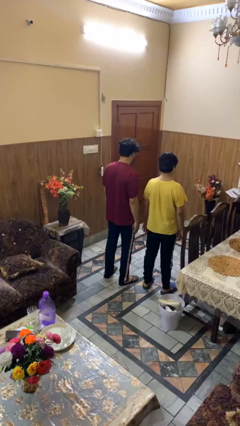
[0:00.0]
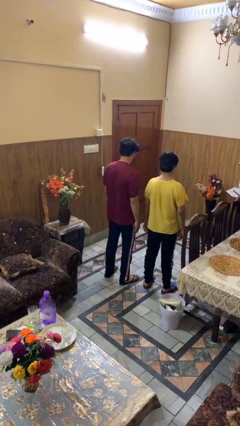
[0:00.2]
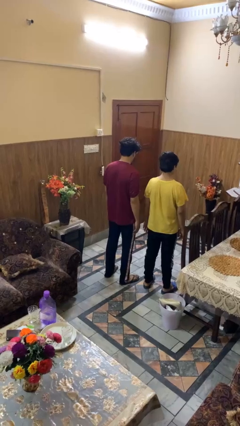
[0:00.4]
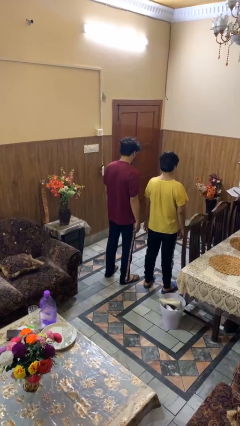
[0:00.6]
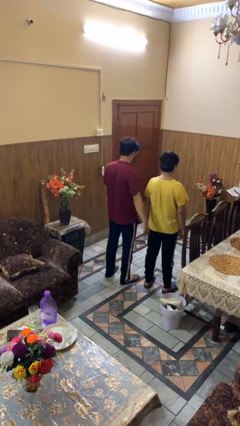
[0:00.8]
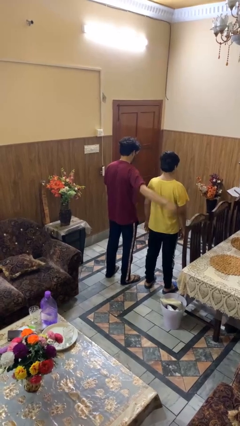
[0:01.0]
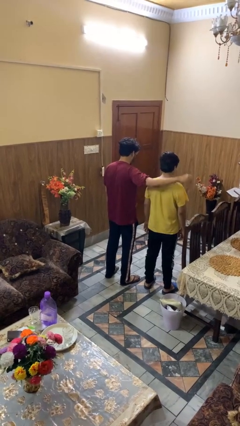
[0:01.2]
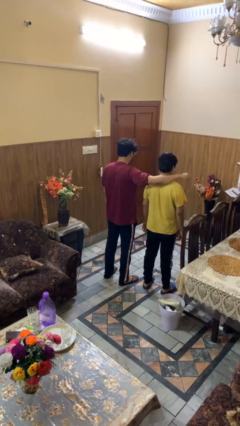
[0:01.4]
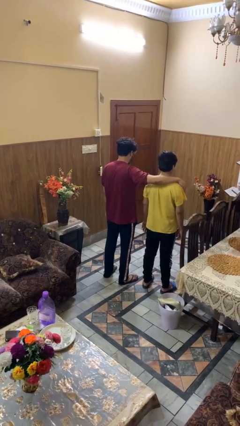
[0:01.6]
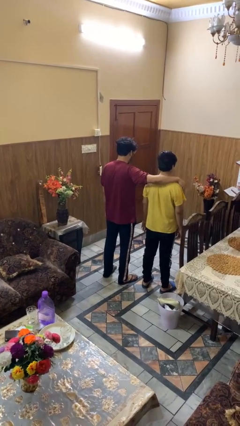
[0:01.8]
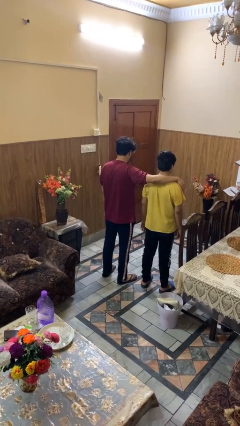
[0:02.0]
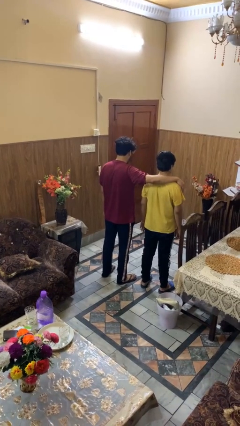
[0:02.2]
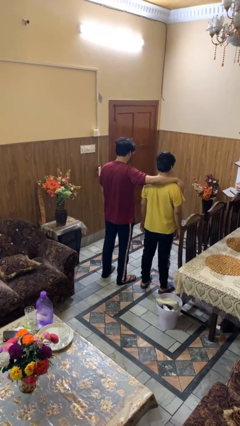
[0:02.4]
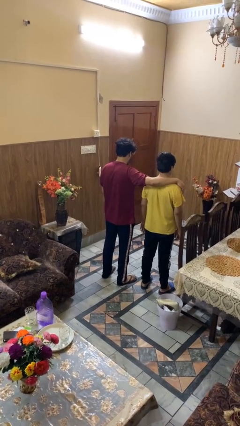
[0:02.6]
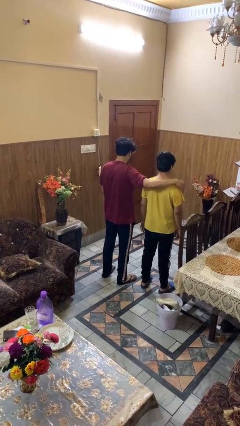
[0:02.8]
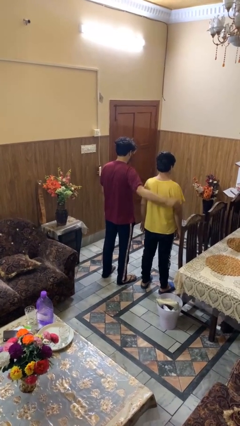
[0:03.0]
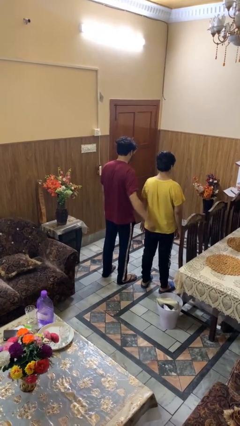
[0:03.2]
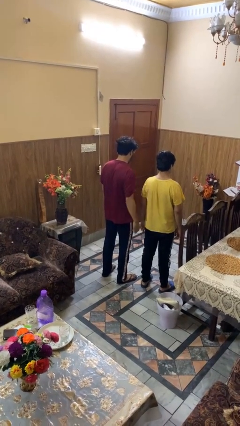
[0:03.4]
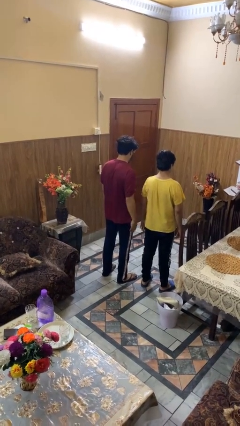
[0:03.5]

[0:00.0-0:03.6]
person pounds shoulders of person

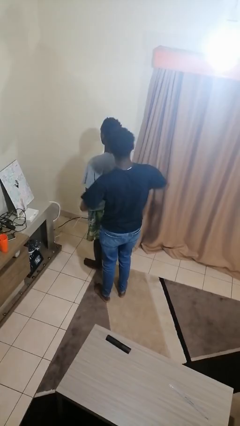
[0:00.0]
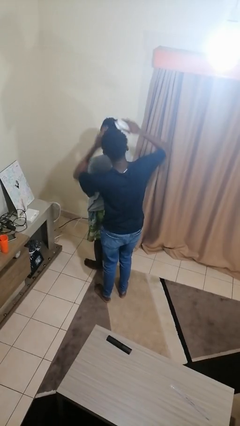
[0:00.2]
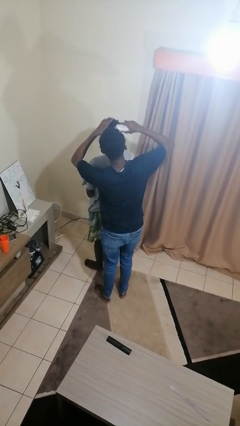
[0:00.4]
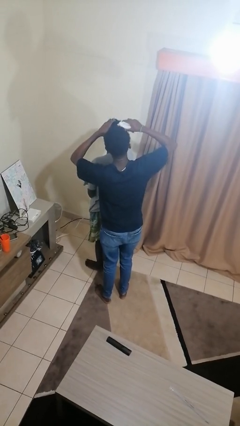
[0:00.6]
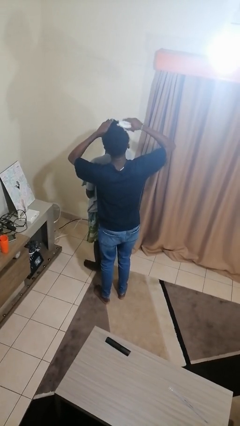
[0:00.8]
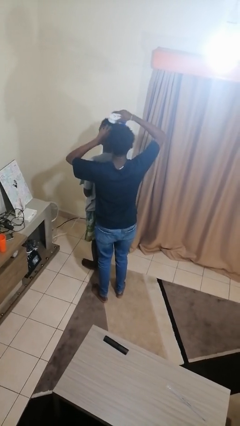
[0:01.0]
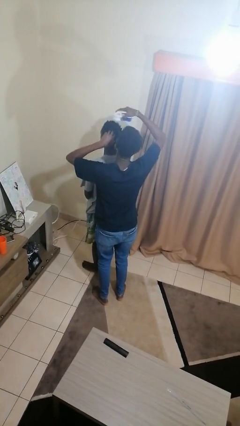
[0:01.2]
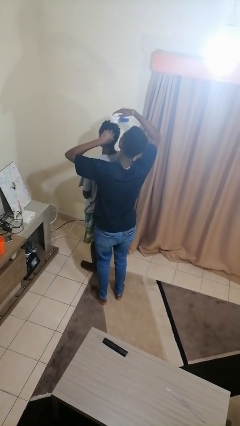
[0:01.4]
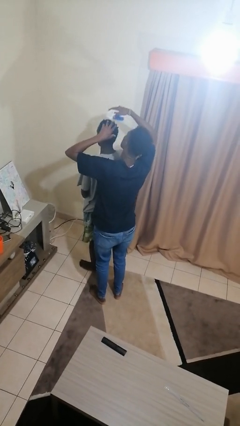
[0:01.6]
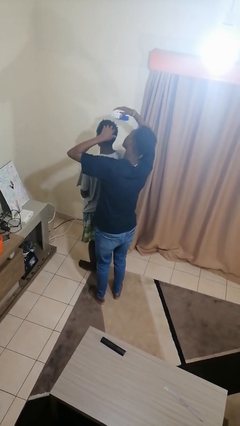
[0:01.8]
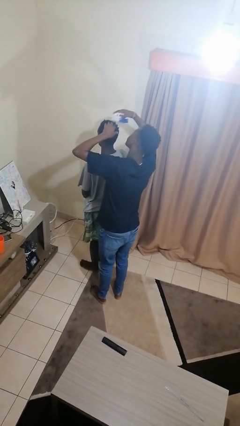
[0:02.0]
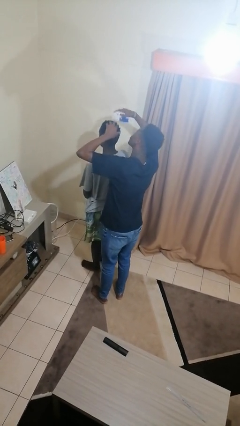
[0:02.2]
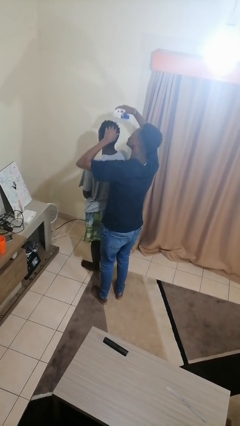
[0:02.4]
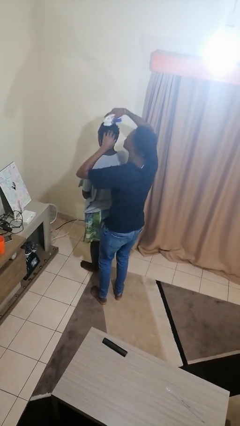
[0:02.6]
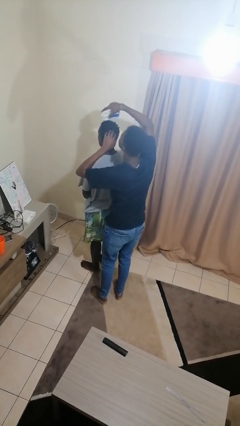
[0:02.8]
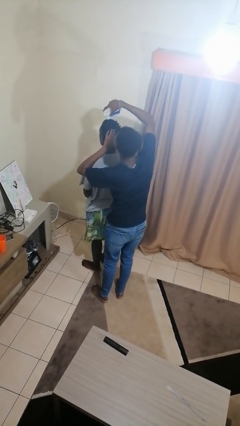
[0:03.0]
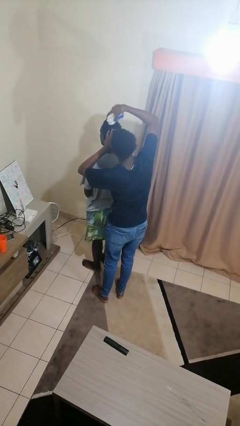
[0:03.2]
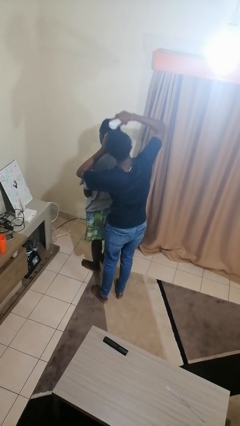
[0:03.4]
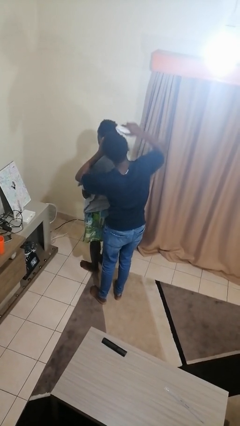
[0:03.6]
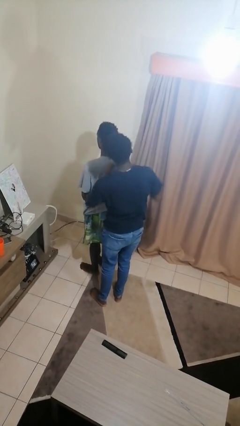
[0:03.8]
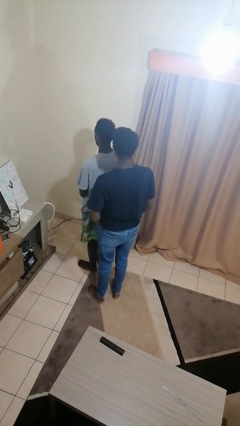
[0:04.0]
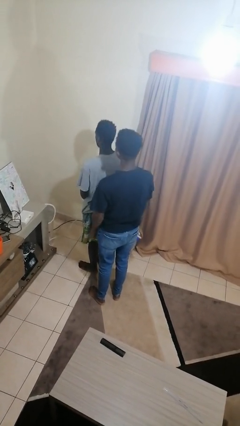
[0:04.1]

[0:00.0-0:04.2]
person brushes hair of person

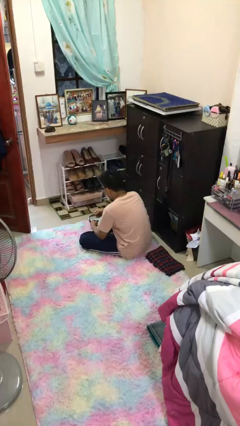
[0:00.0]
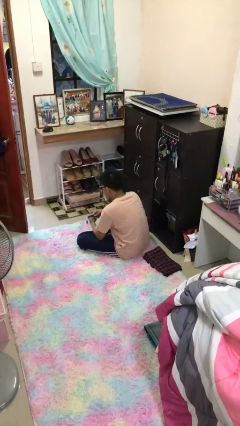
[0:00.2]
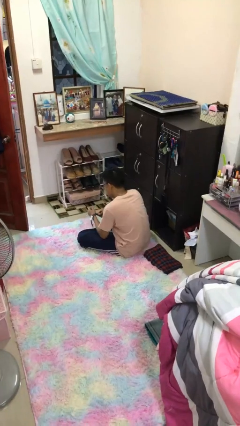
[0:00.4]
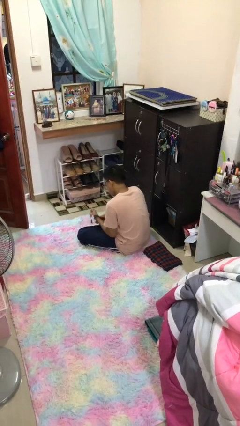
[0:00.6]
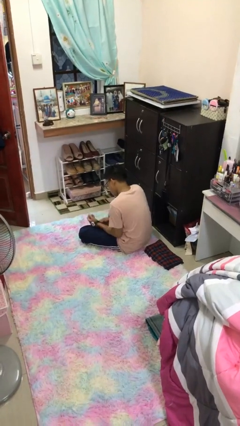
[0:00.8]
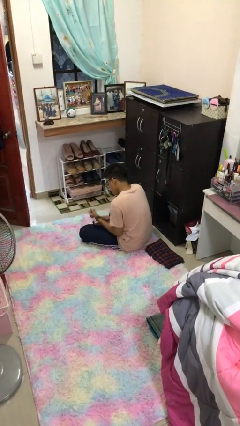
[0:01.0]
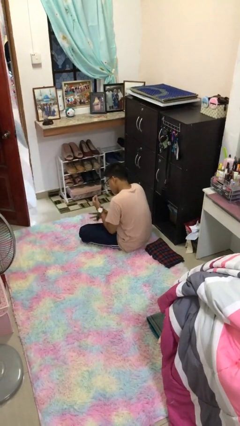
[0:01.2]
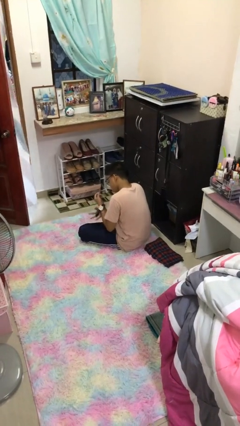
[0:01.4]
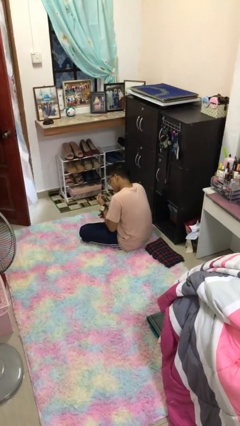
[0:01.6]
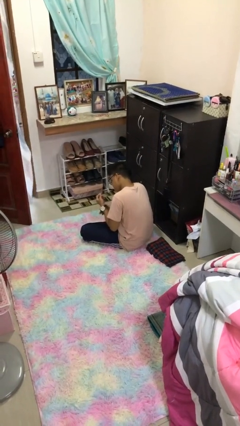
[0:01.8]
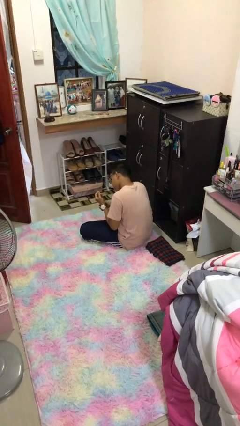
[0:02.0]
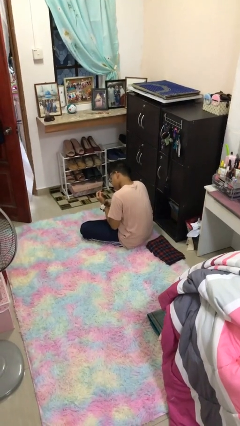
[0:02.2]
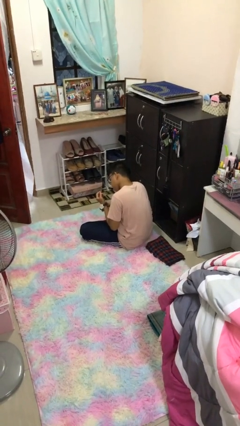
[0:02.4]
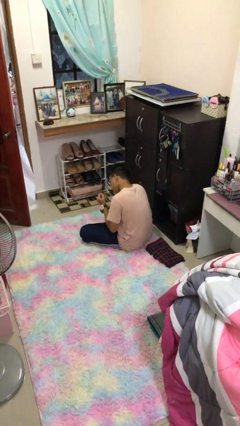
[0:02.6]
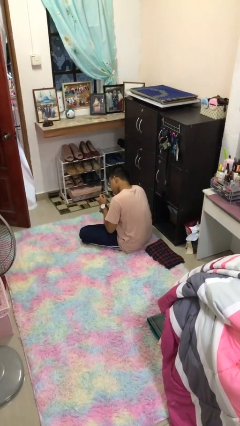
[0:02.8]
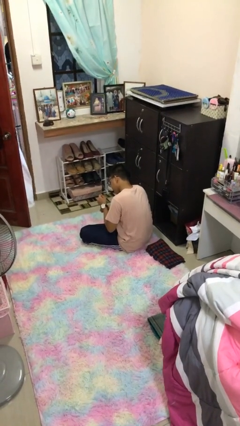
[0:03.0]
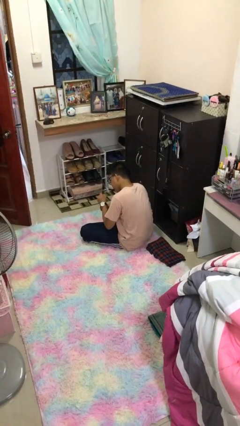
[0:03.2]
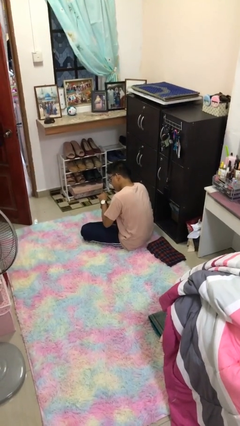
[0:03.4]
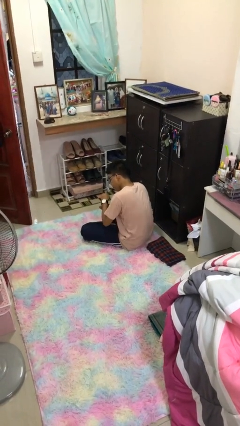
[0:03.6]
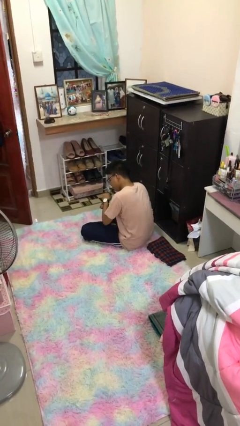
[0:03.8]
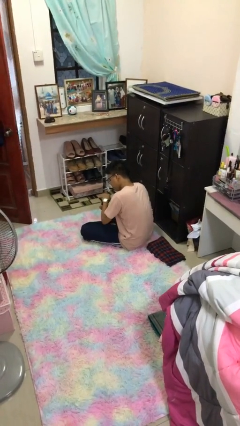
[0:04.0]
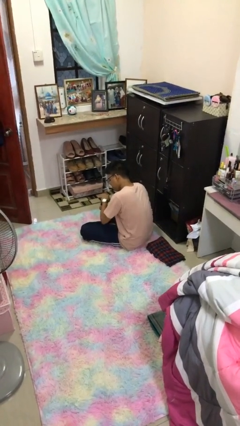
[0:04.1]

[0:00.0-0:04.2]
person puts on wristwatch

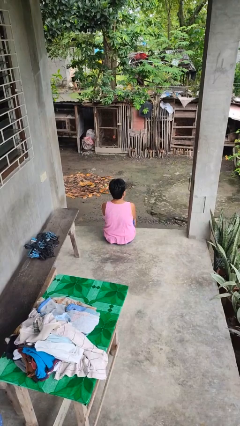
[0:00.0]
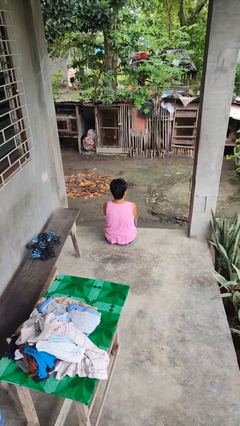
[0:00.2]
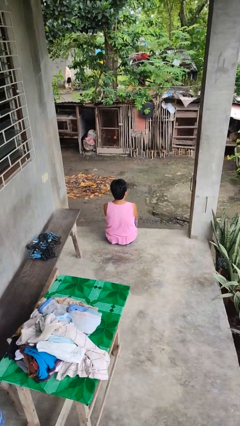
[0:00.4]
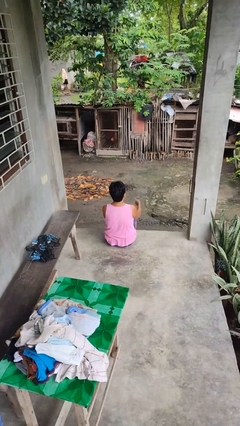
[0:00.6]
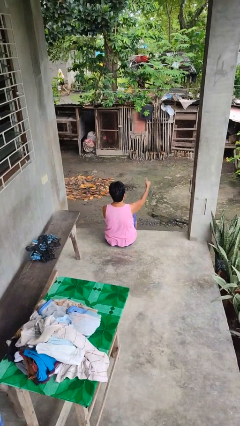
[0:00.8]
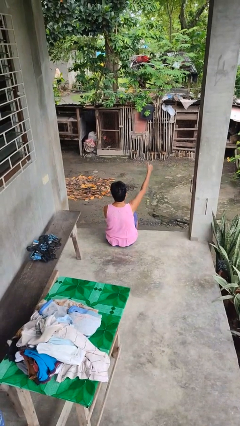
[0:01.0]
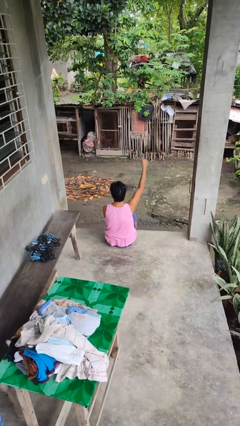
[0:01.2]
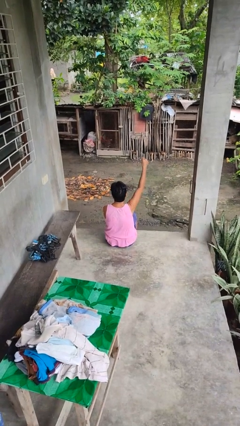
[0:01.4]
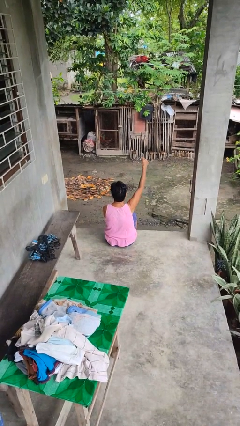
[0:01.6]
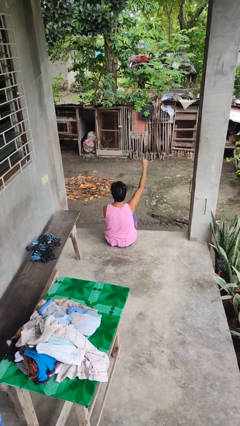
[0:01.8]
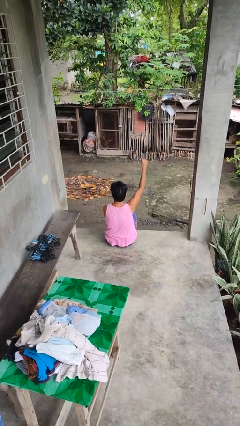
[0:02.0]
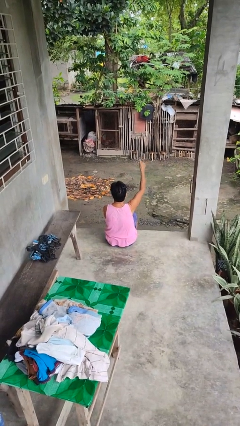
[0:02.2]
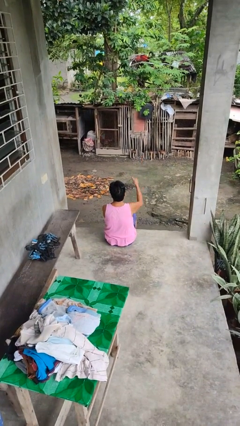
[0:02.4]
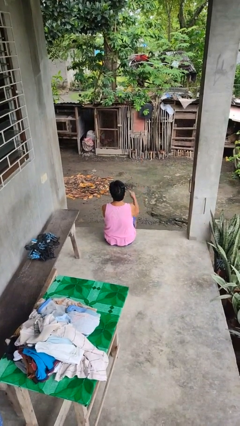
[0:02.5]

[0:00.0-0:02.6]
person gestures thumbs up

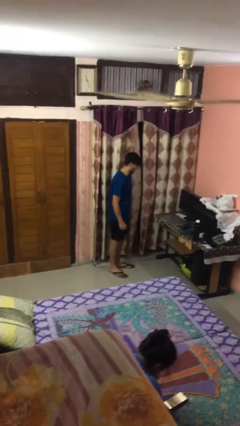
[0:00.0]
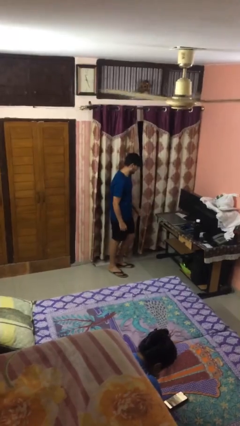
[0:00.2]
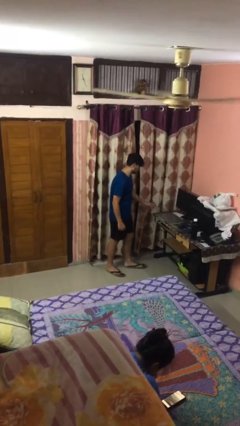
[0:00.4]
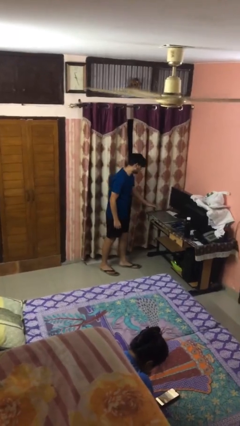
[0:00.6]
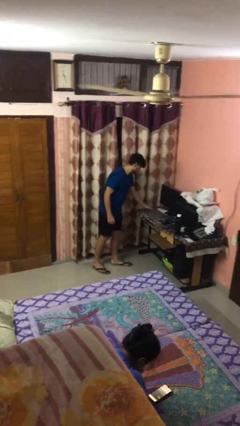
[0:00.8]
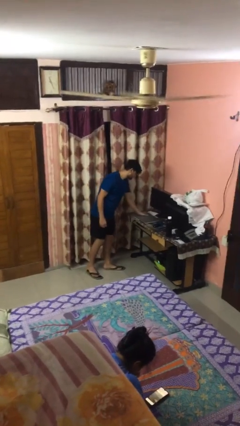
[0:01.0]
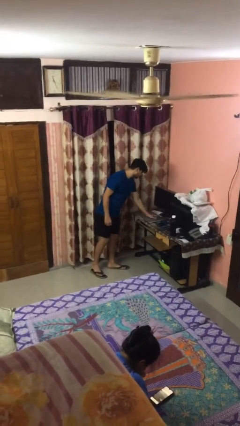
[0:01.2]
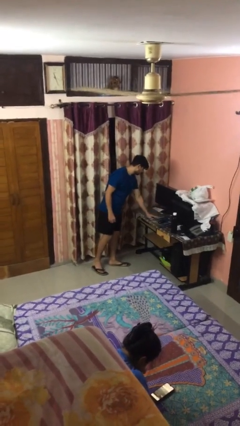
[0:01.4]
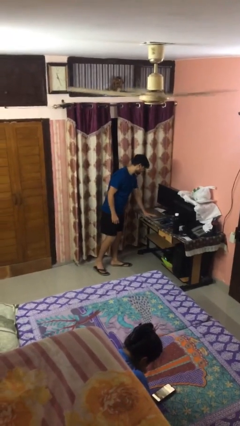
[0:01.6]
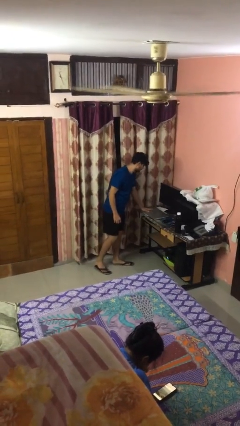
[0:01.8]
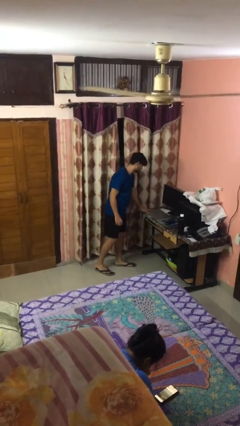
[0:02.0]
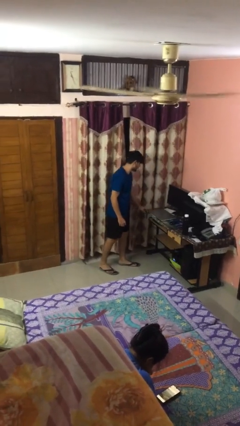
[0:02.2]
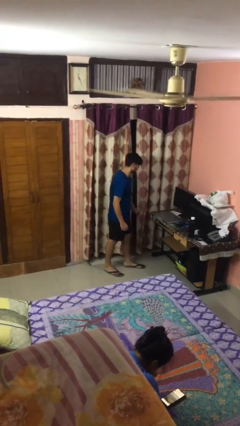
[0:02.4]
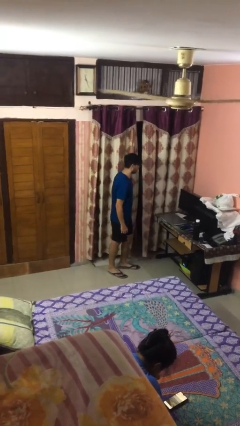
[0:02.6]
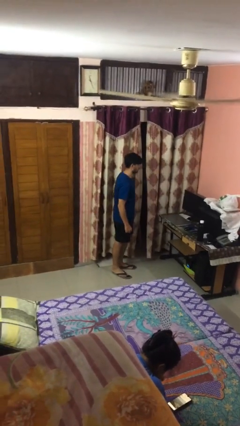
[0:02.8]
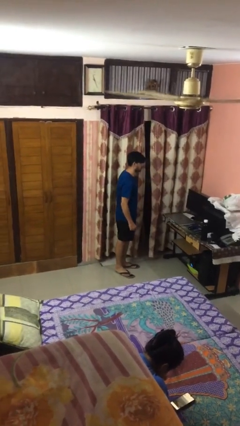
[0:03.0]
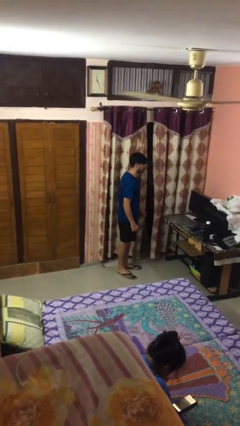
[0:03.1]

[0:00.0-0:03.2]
person waves hand over object
